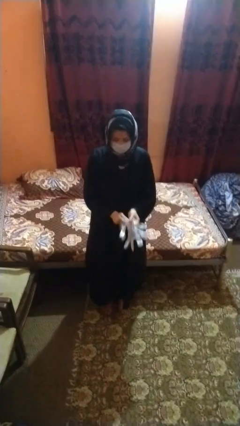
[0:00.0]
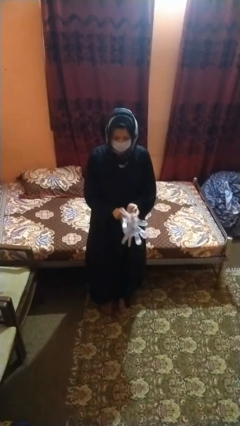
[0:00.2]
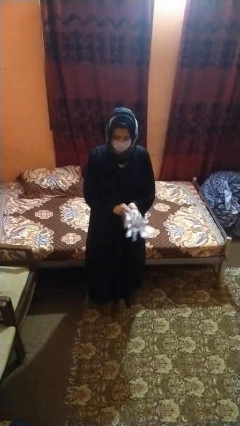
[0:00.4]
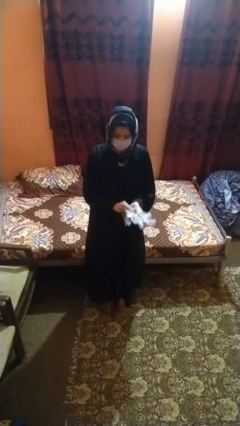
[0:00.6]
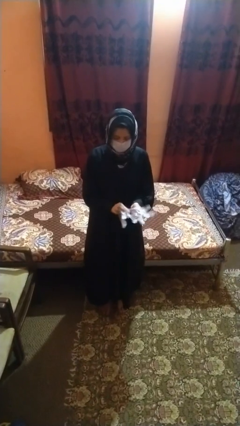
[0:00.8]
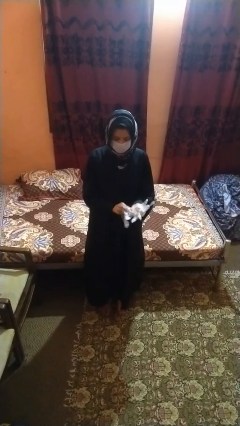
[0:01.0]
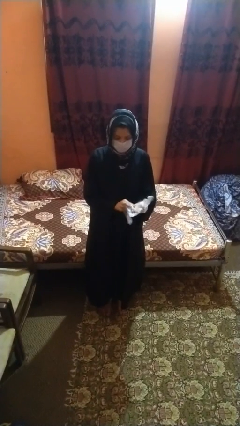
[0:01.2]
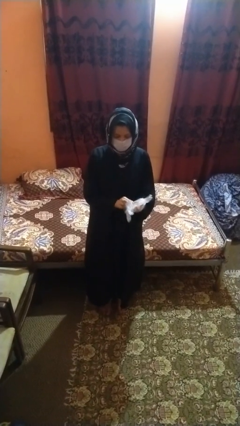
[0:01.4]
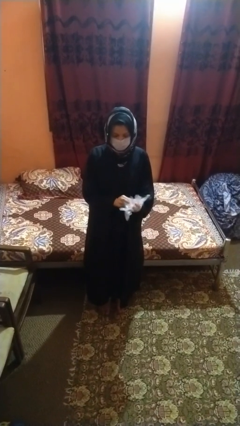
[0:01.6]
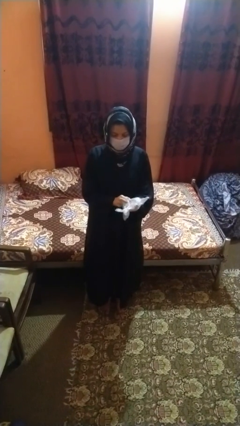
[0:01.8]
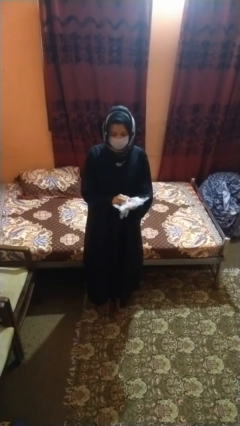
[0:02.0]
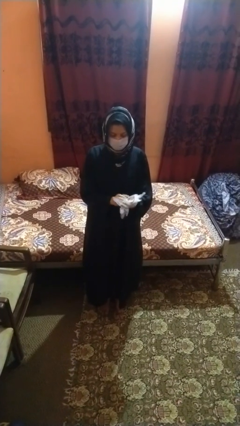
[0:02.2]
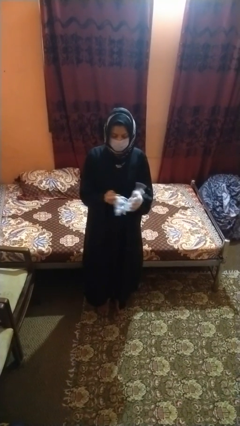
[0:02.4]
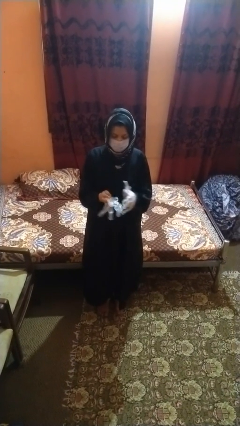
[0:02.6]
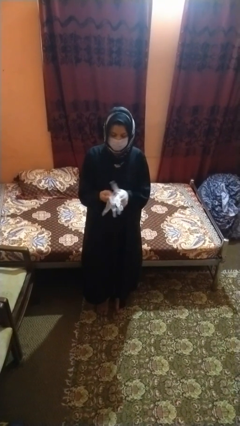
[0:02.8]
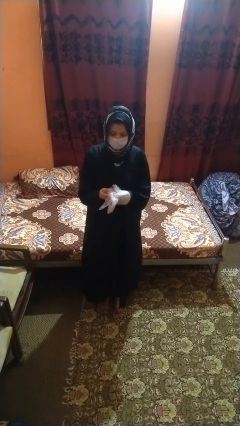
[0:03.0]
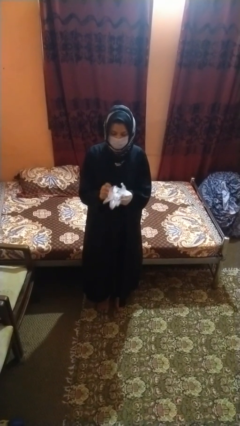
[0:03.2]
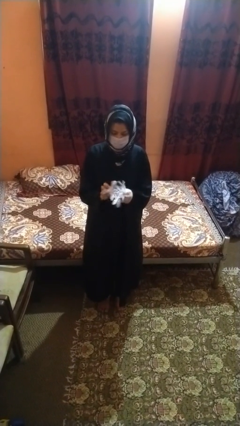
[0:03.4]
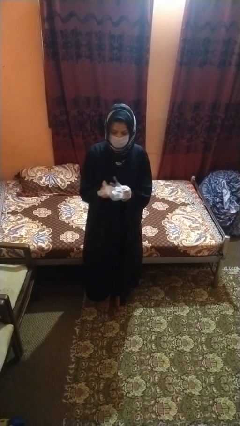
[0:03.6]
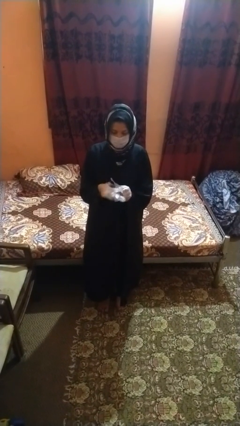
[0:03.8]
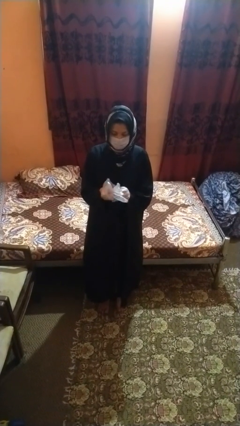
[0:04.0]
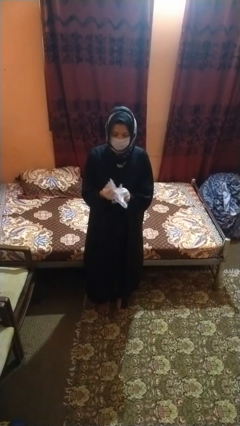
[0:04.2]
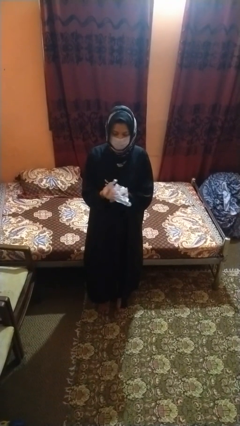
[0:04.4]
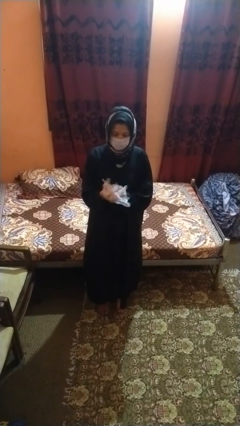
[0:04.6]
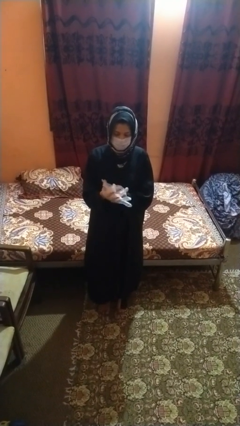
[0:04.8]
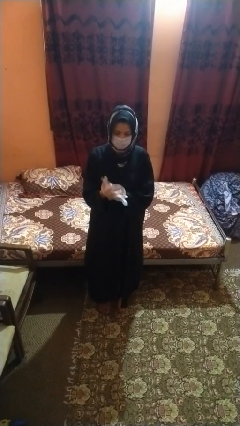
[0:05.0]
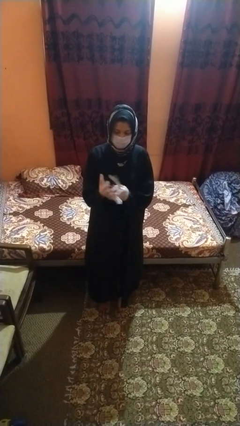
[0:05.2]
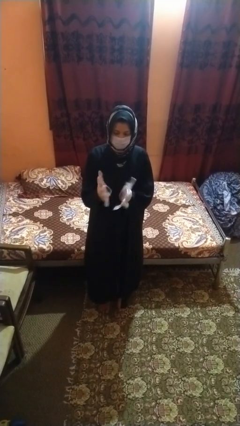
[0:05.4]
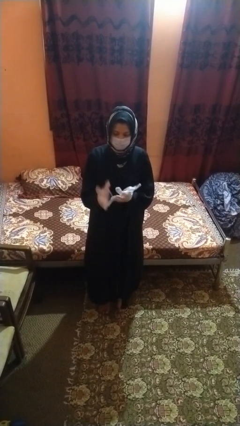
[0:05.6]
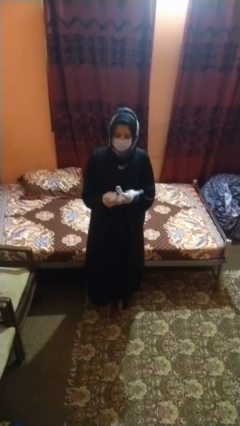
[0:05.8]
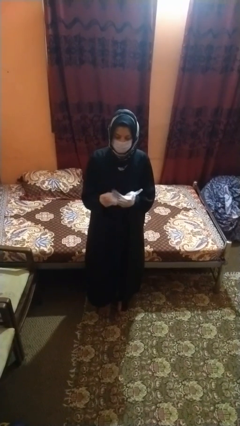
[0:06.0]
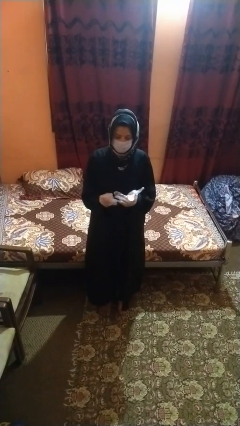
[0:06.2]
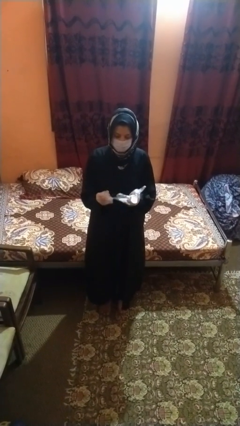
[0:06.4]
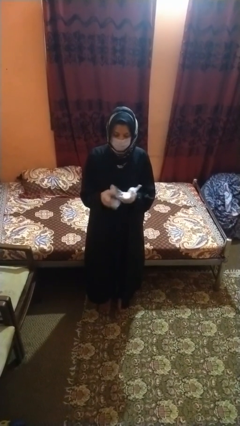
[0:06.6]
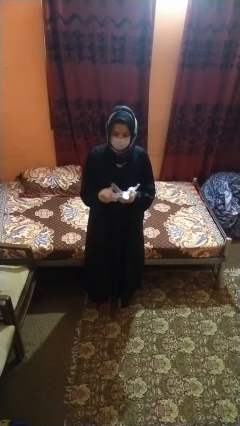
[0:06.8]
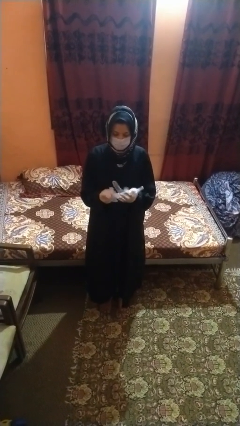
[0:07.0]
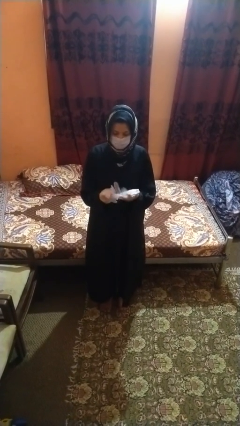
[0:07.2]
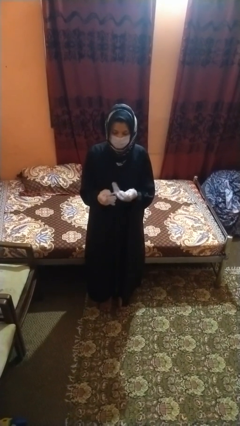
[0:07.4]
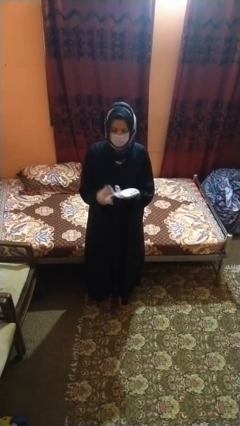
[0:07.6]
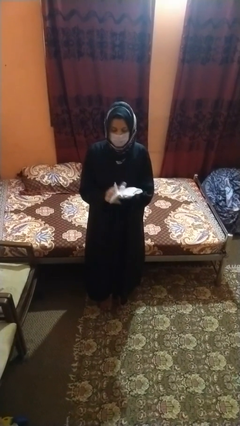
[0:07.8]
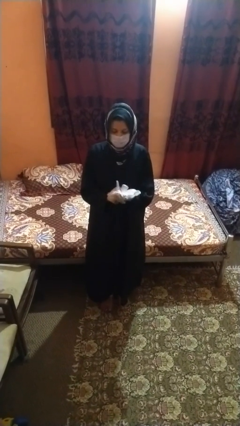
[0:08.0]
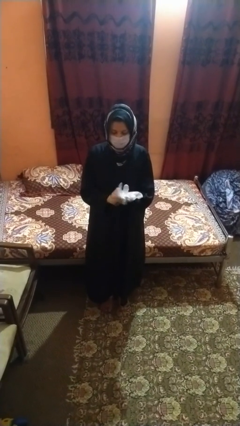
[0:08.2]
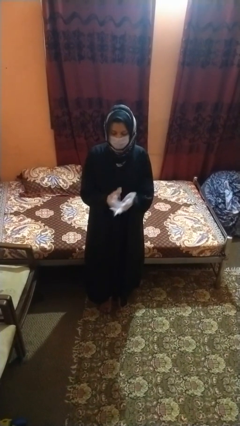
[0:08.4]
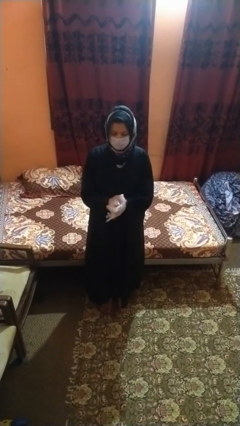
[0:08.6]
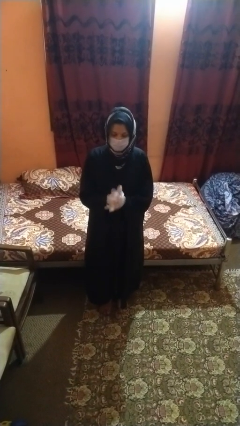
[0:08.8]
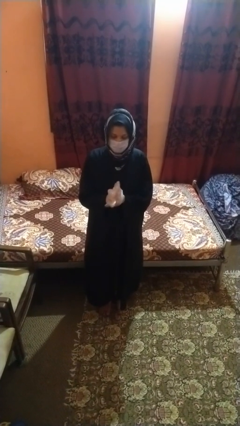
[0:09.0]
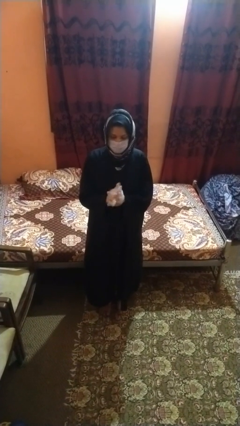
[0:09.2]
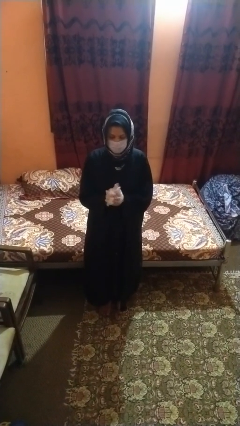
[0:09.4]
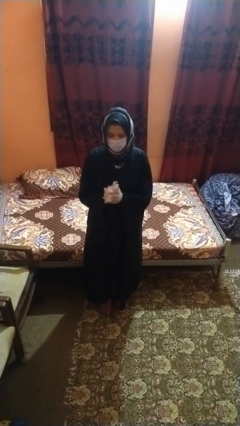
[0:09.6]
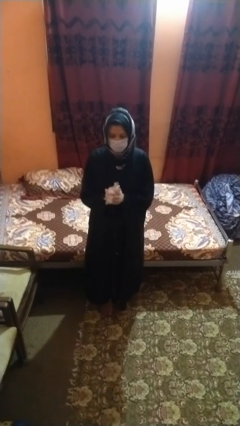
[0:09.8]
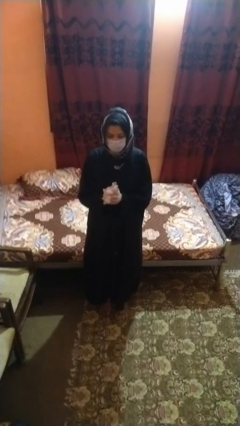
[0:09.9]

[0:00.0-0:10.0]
person puts on gloves

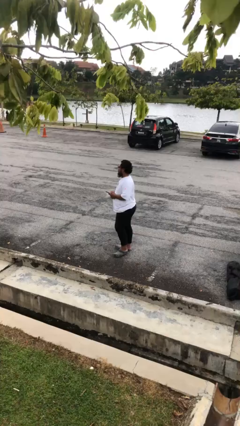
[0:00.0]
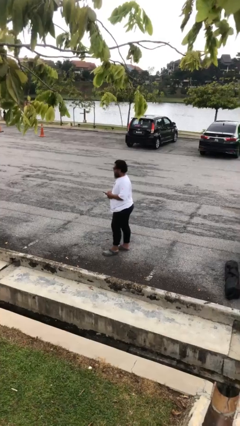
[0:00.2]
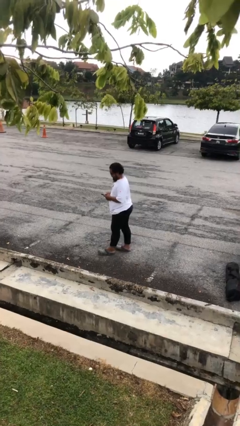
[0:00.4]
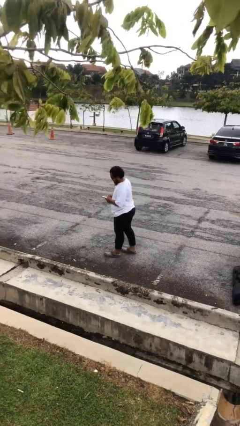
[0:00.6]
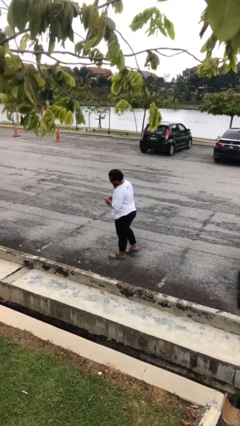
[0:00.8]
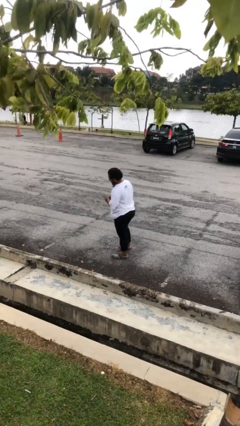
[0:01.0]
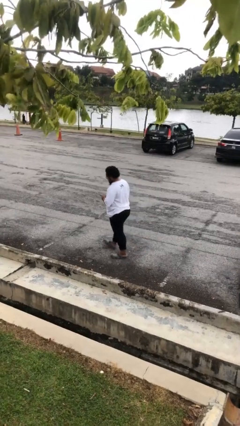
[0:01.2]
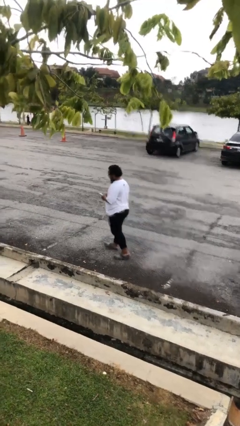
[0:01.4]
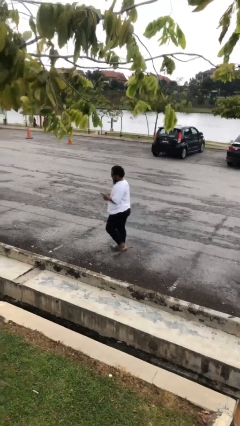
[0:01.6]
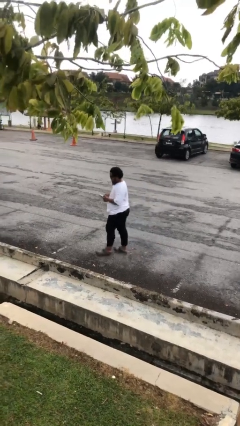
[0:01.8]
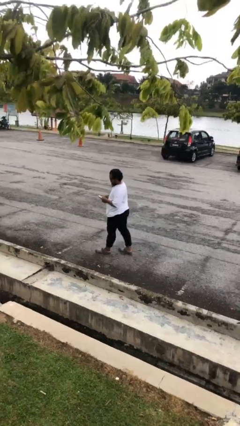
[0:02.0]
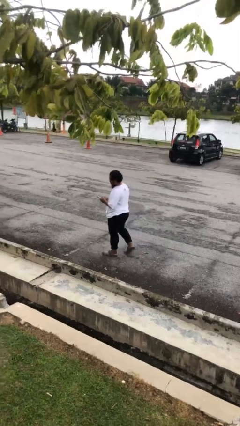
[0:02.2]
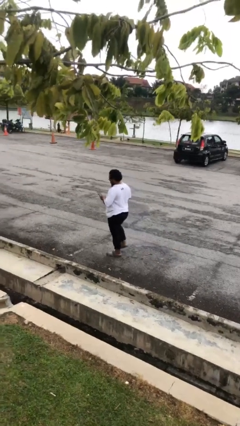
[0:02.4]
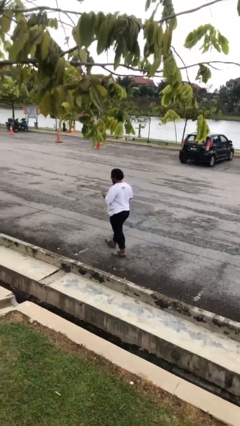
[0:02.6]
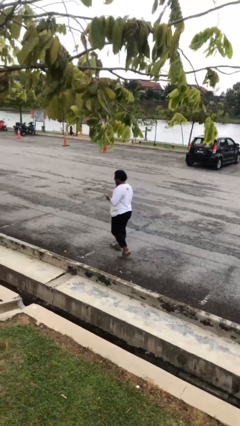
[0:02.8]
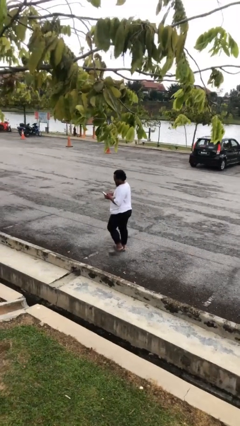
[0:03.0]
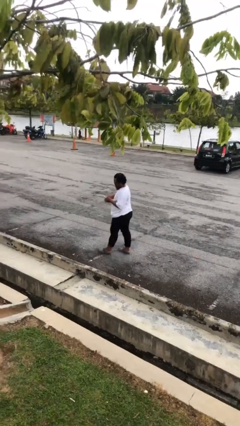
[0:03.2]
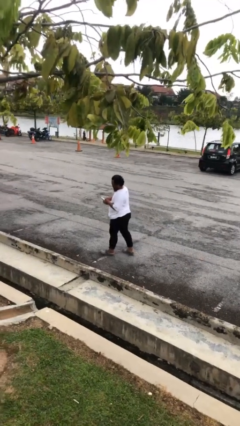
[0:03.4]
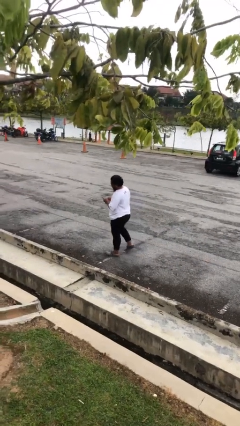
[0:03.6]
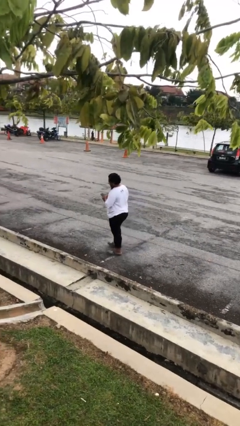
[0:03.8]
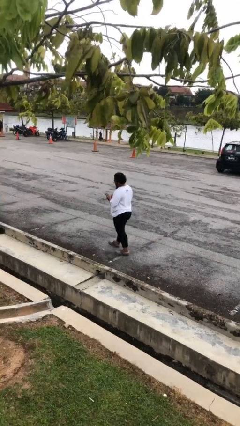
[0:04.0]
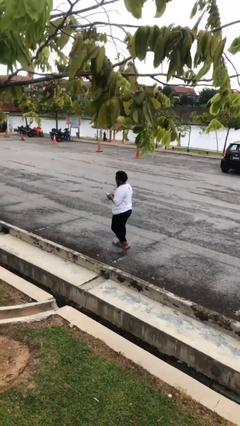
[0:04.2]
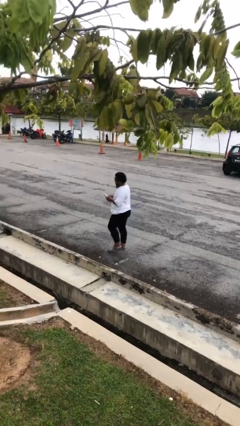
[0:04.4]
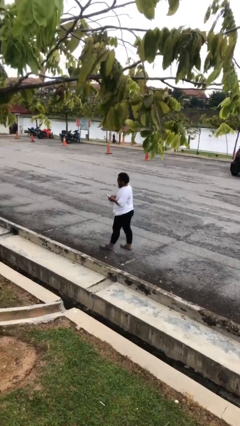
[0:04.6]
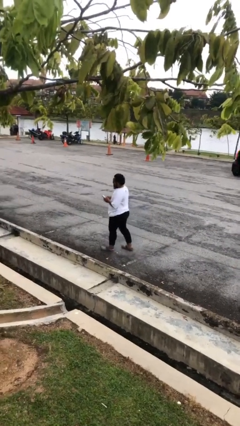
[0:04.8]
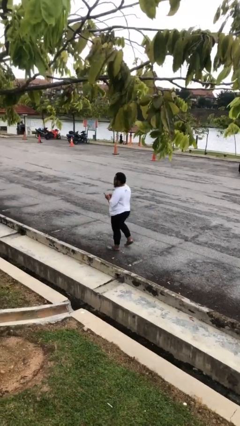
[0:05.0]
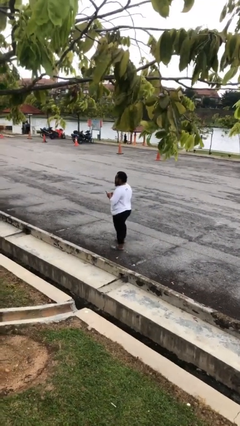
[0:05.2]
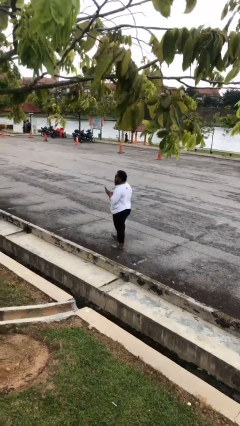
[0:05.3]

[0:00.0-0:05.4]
person texts on phone

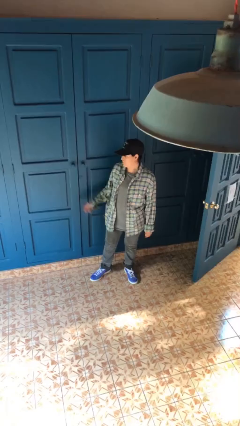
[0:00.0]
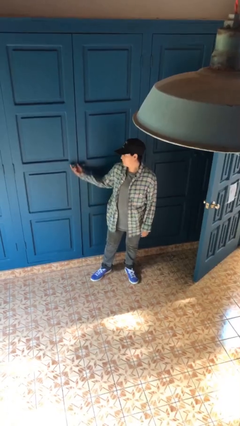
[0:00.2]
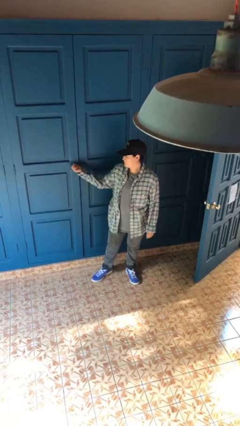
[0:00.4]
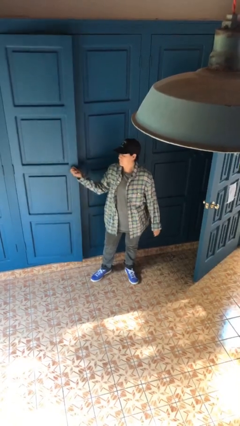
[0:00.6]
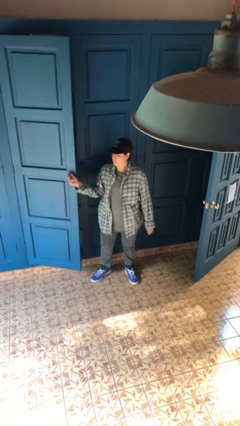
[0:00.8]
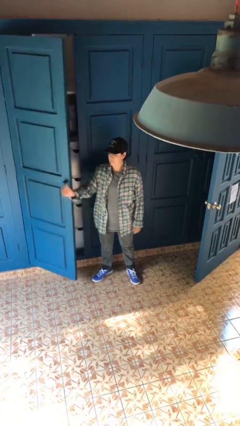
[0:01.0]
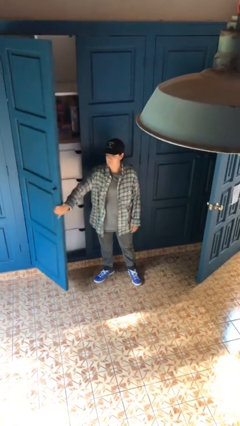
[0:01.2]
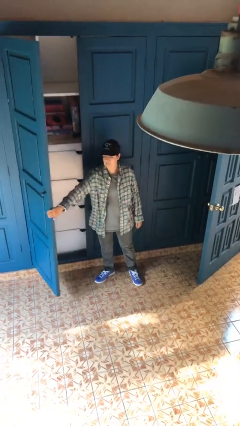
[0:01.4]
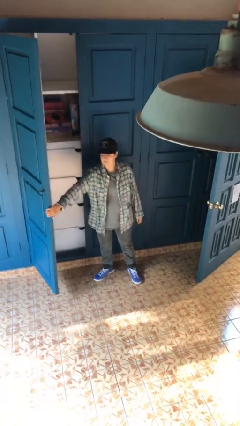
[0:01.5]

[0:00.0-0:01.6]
person opens closet door

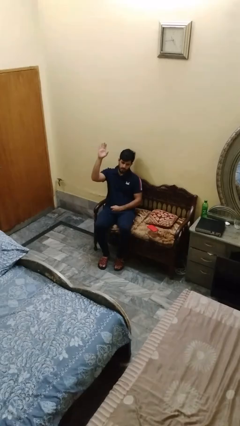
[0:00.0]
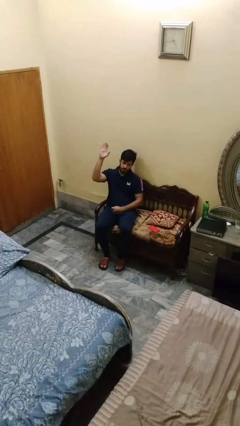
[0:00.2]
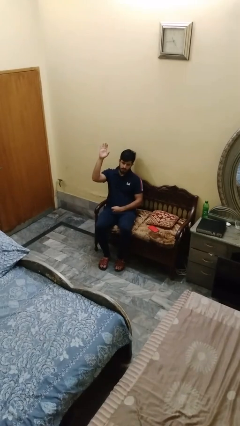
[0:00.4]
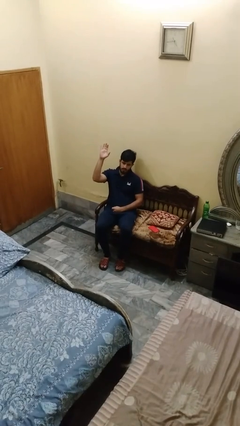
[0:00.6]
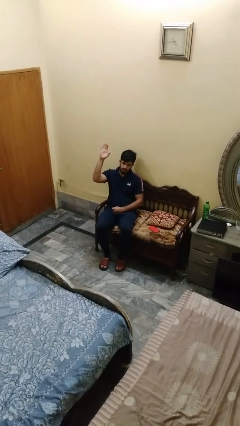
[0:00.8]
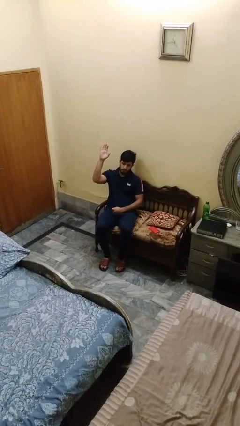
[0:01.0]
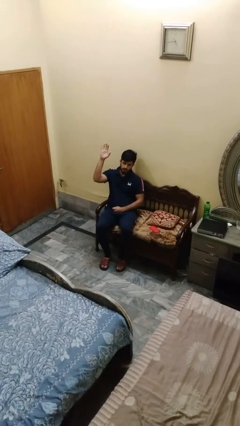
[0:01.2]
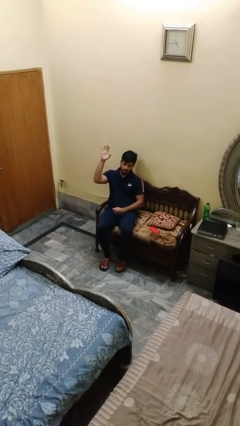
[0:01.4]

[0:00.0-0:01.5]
person gestures raise hand
